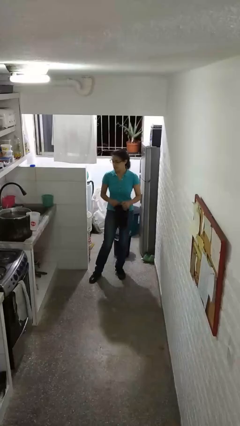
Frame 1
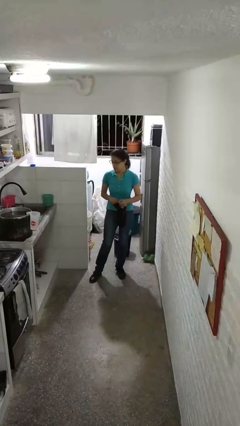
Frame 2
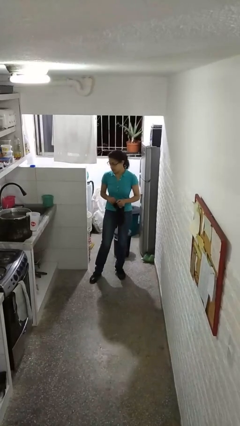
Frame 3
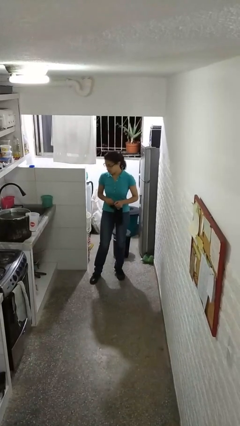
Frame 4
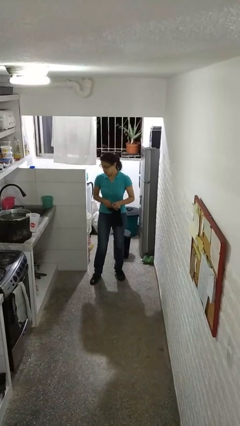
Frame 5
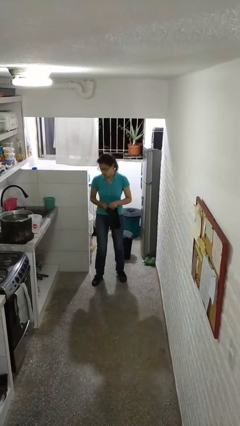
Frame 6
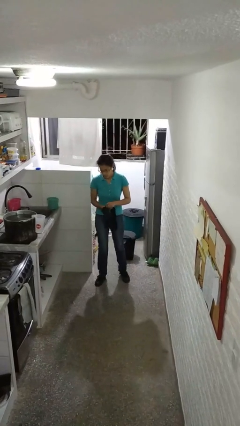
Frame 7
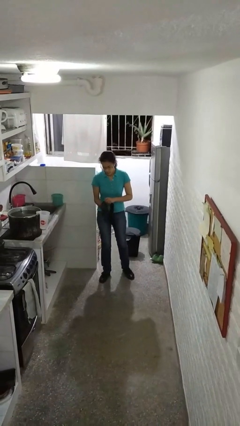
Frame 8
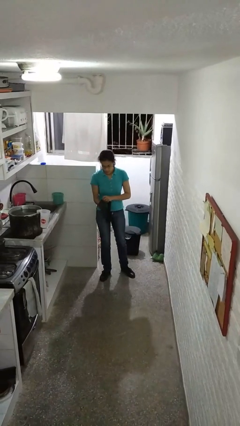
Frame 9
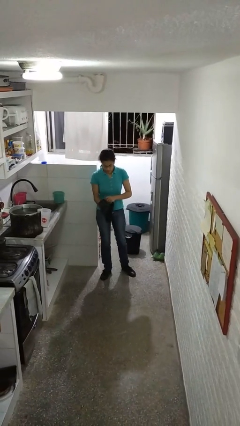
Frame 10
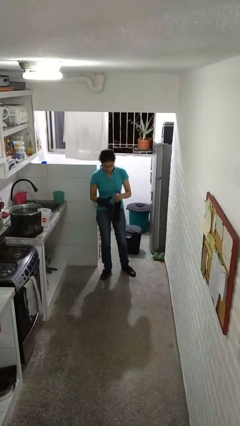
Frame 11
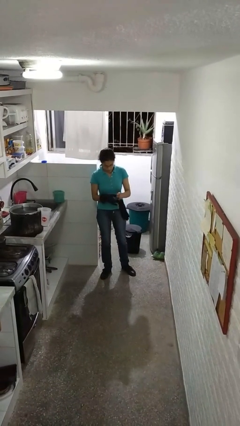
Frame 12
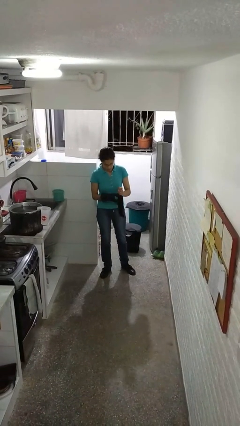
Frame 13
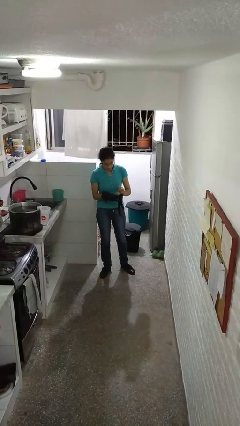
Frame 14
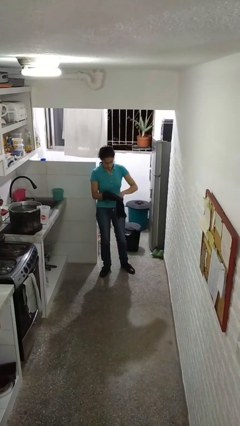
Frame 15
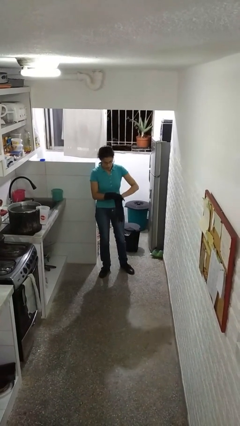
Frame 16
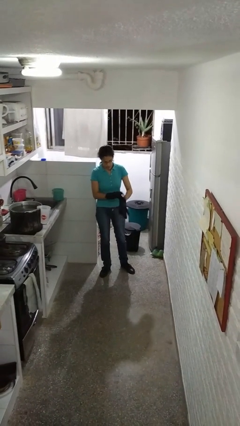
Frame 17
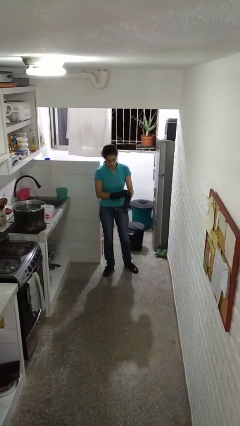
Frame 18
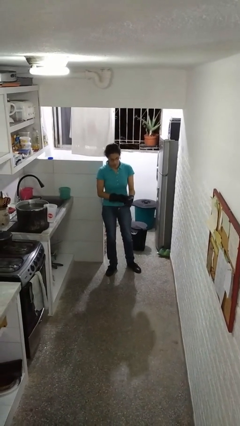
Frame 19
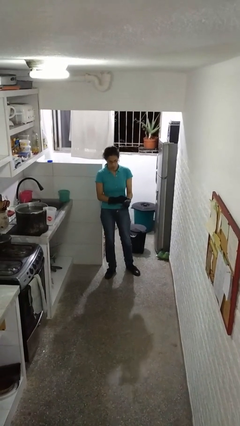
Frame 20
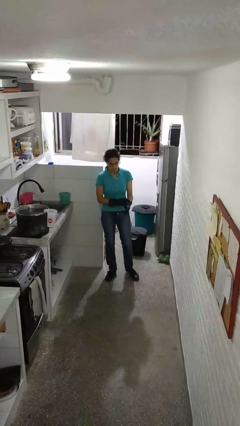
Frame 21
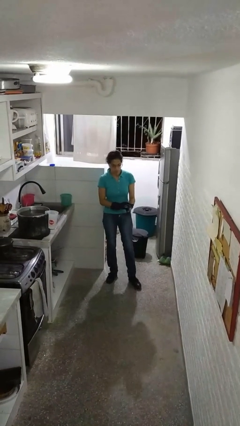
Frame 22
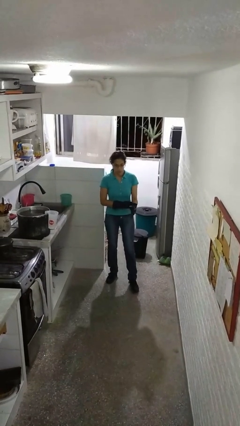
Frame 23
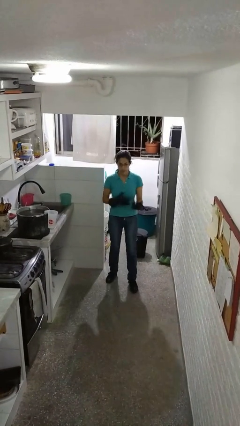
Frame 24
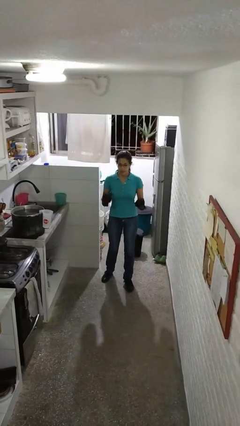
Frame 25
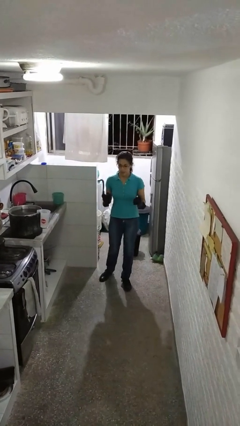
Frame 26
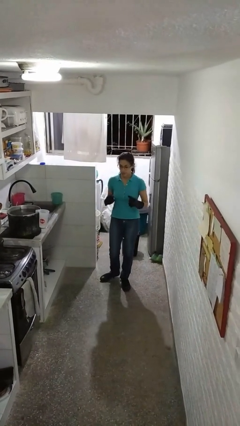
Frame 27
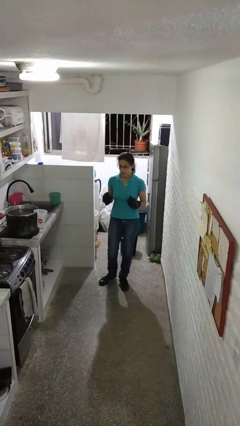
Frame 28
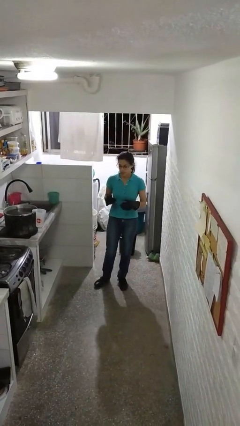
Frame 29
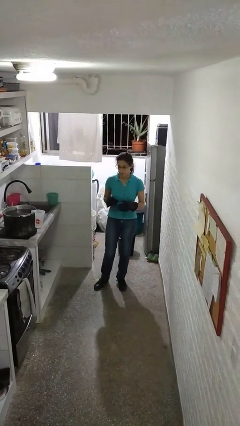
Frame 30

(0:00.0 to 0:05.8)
person puts on gloves

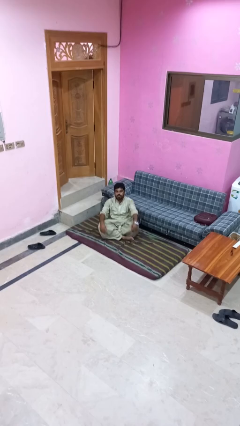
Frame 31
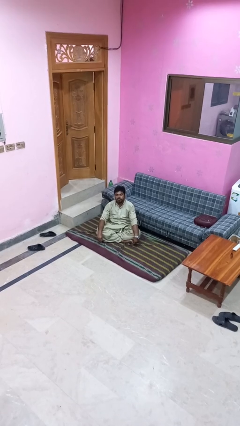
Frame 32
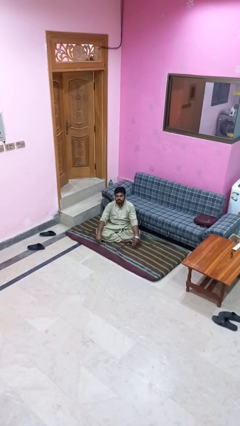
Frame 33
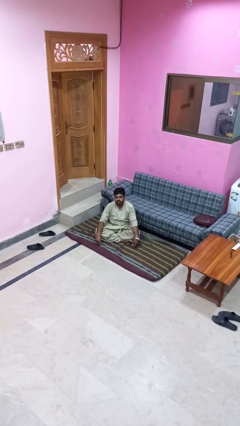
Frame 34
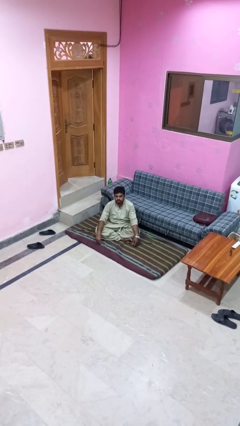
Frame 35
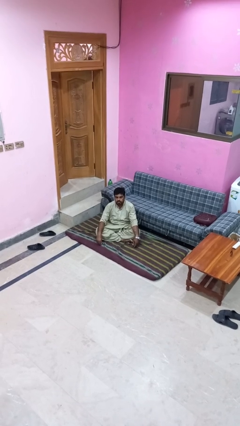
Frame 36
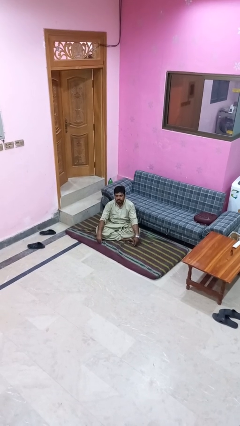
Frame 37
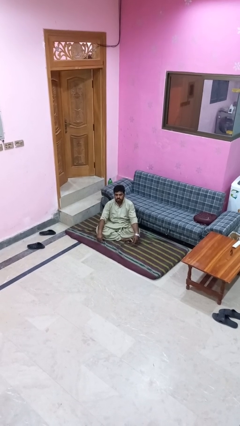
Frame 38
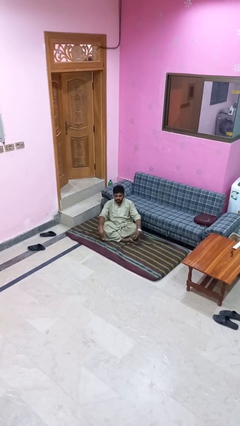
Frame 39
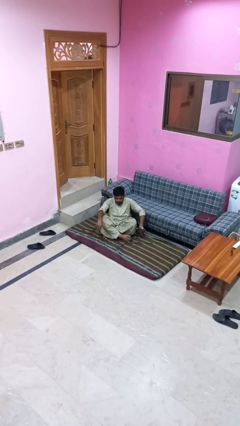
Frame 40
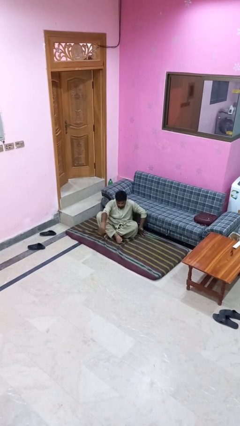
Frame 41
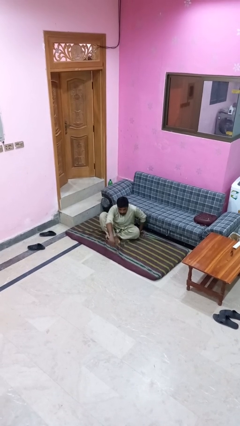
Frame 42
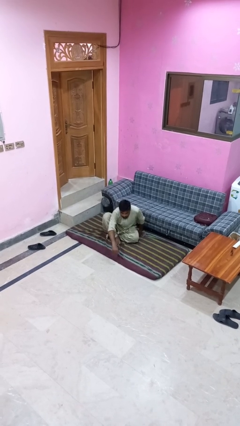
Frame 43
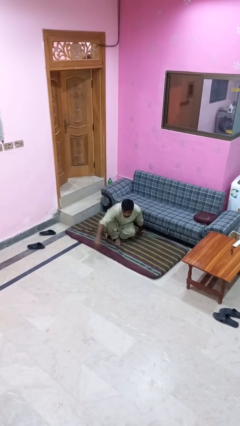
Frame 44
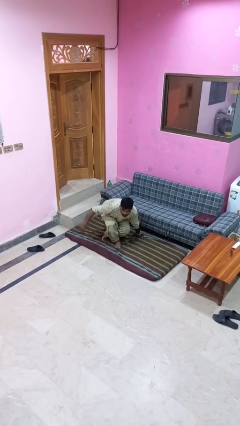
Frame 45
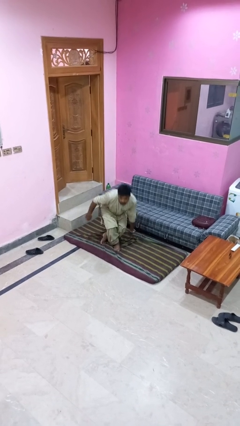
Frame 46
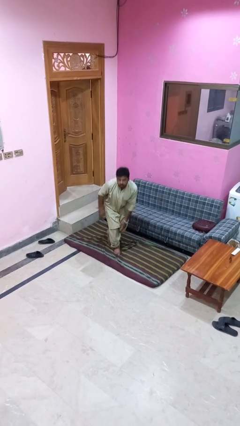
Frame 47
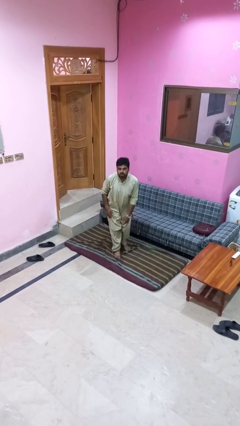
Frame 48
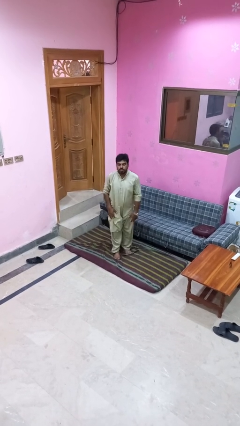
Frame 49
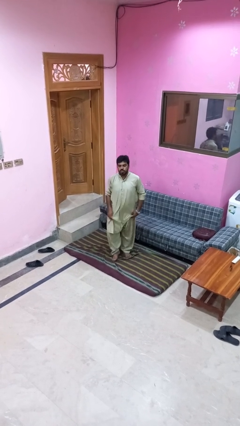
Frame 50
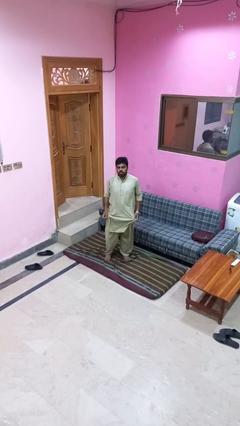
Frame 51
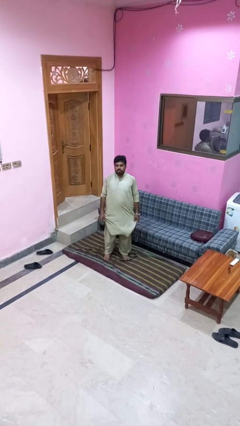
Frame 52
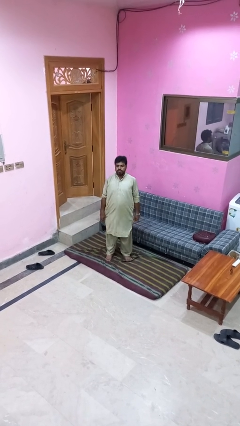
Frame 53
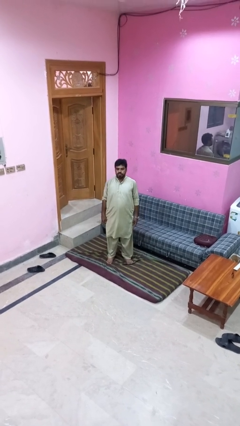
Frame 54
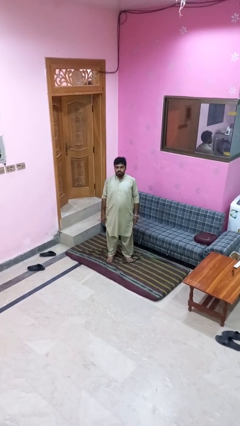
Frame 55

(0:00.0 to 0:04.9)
person stands up from floor

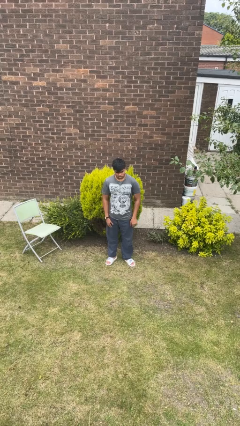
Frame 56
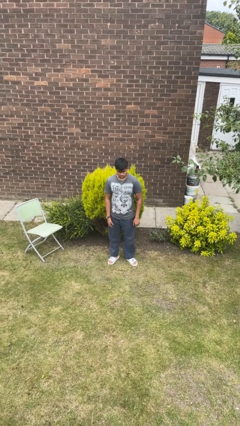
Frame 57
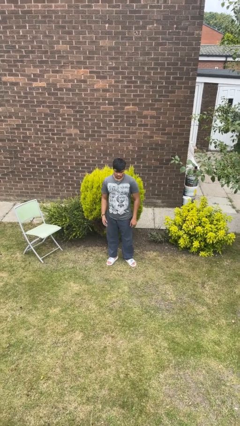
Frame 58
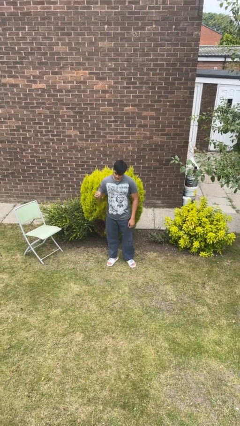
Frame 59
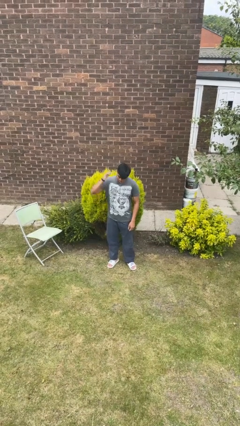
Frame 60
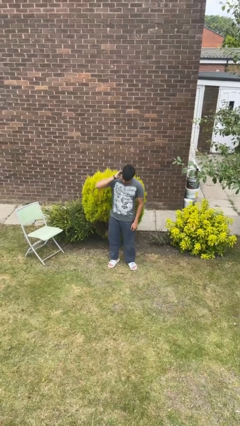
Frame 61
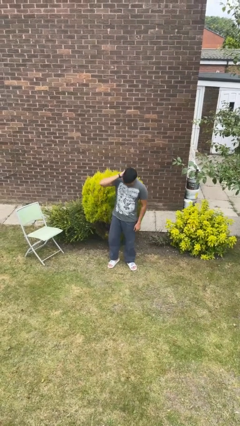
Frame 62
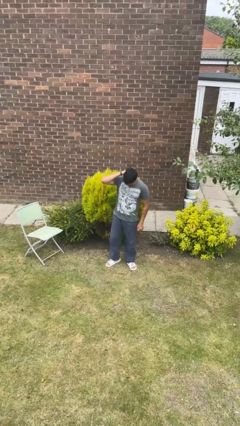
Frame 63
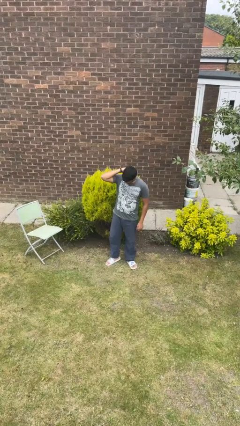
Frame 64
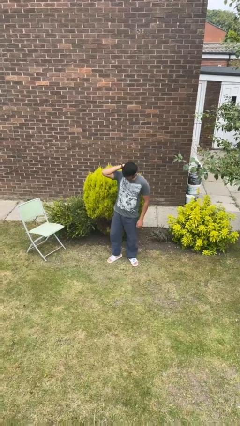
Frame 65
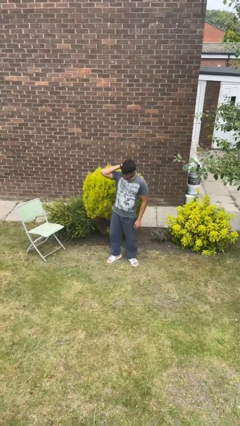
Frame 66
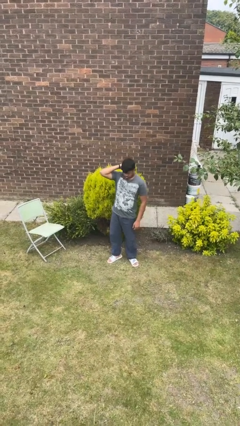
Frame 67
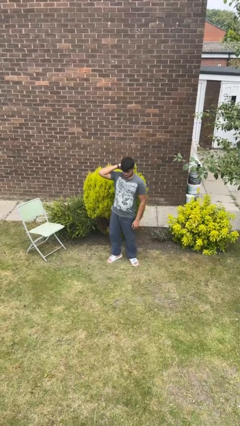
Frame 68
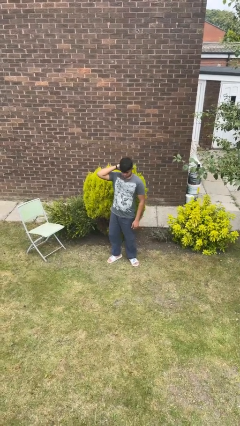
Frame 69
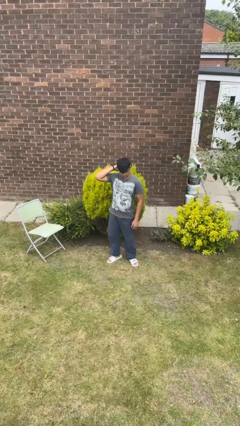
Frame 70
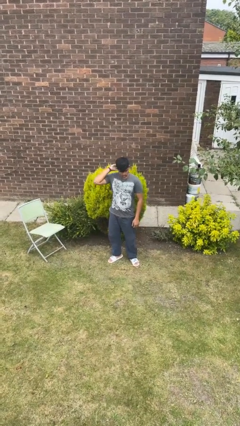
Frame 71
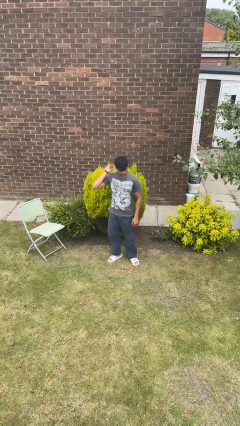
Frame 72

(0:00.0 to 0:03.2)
person scratches face

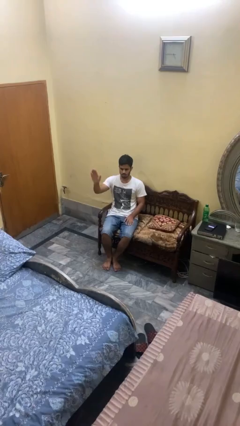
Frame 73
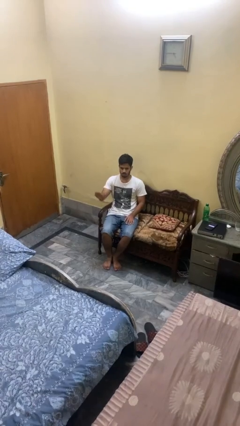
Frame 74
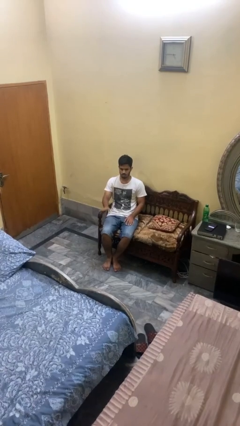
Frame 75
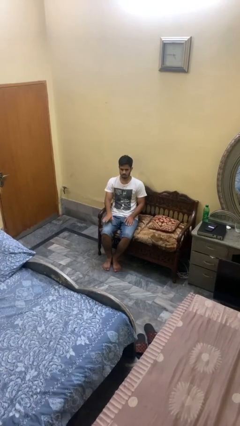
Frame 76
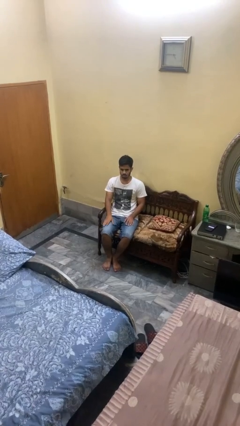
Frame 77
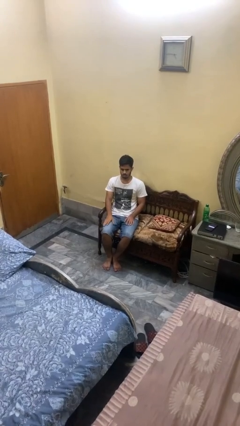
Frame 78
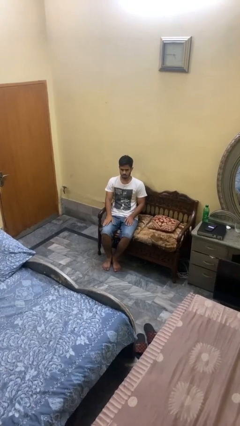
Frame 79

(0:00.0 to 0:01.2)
person gestures lower hand

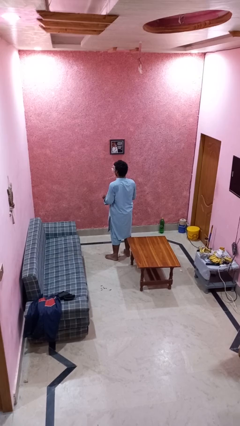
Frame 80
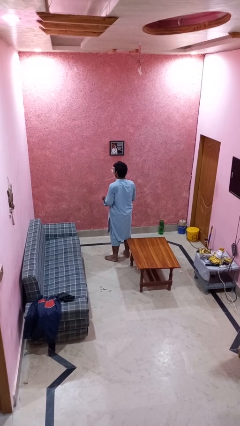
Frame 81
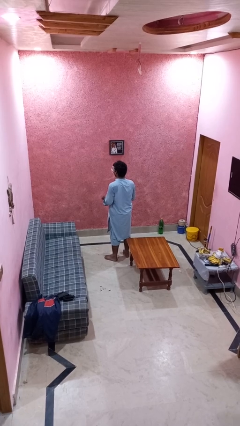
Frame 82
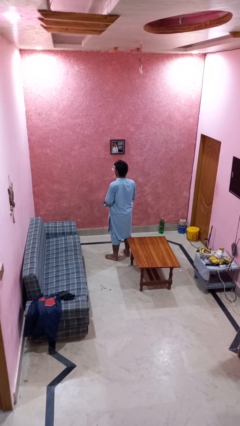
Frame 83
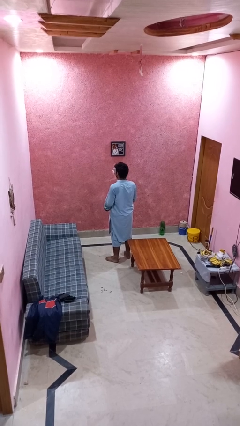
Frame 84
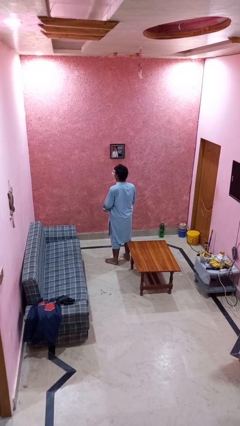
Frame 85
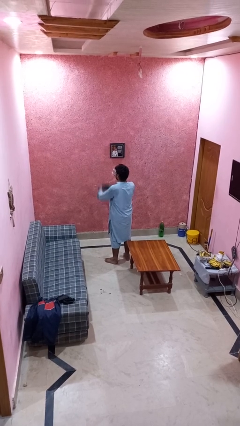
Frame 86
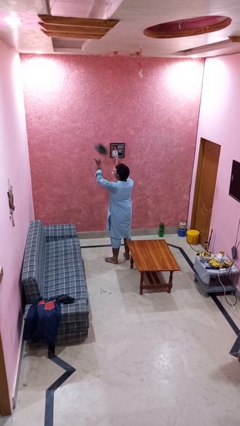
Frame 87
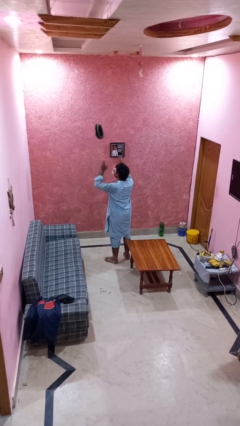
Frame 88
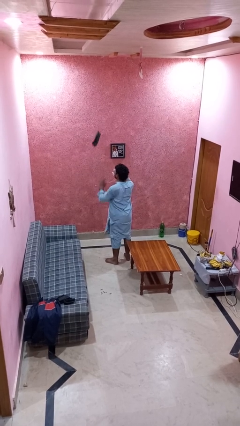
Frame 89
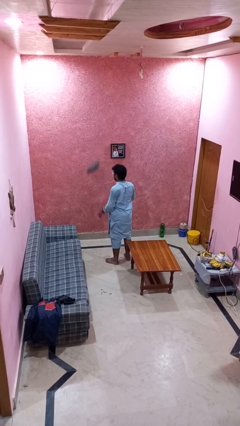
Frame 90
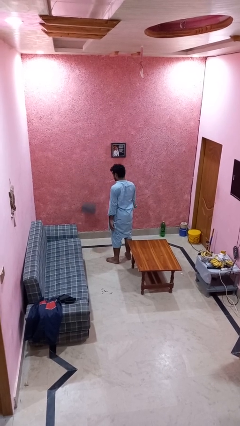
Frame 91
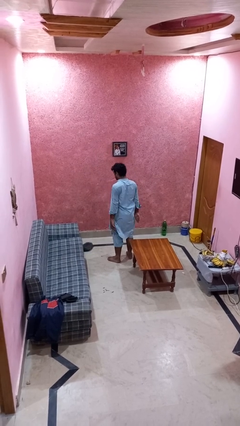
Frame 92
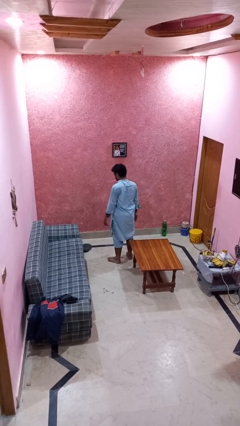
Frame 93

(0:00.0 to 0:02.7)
person throws object into air
